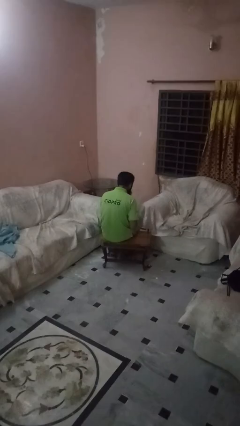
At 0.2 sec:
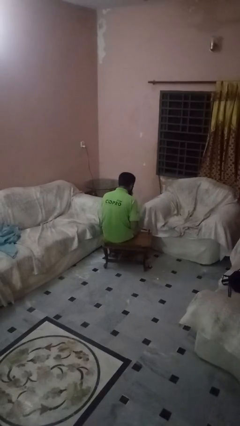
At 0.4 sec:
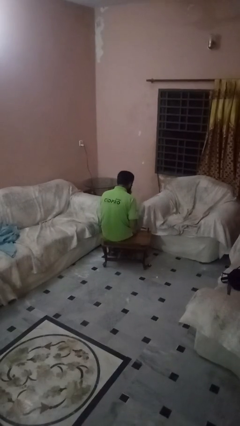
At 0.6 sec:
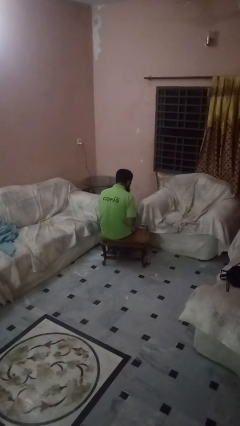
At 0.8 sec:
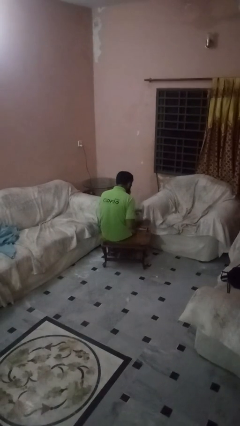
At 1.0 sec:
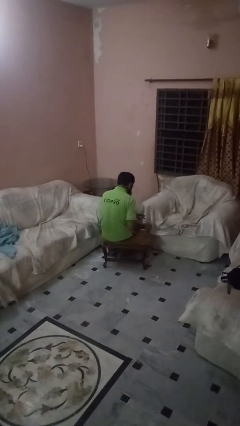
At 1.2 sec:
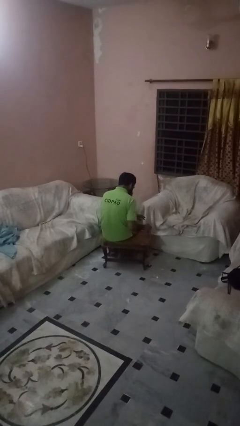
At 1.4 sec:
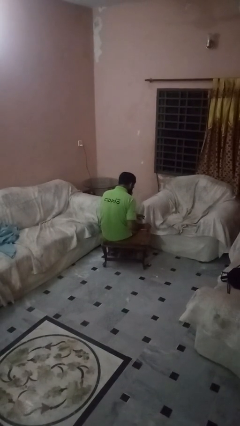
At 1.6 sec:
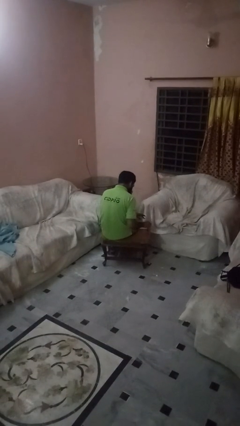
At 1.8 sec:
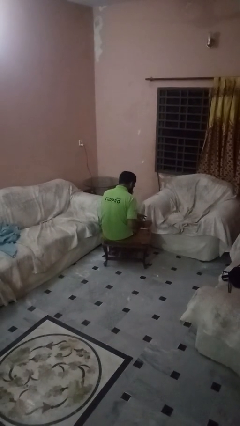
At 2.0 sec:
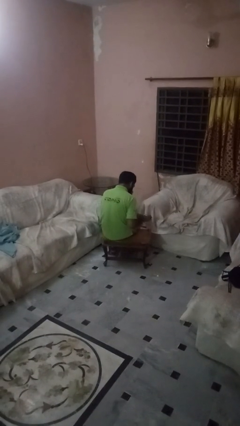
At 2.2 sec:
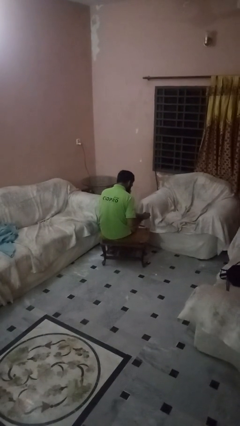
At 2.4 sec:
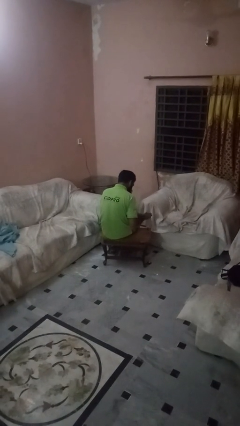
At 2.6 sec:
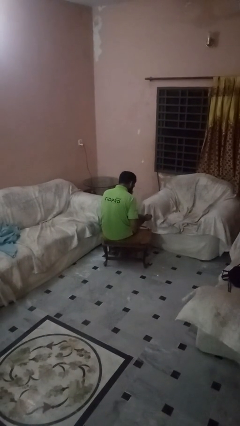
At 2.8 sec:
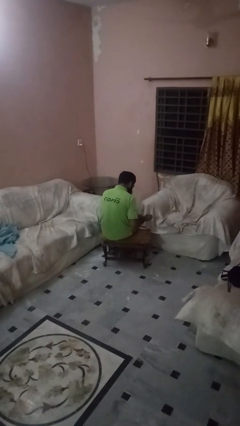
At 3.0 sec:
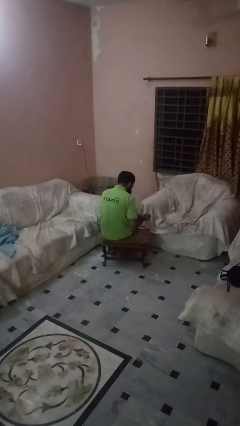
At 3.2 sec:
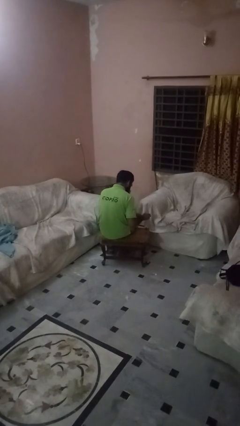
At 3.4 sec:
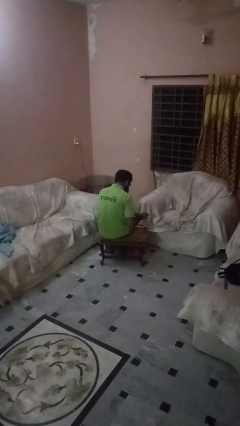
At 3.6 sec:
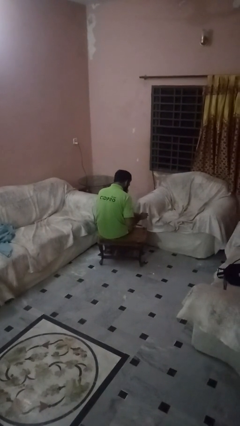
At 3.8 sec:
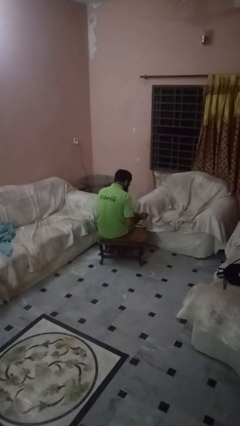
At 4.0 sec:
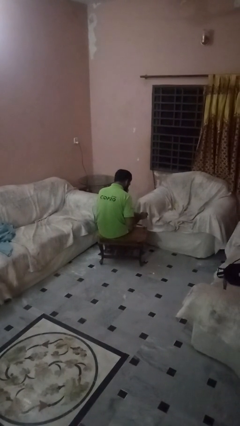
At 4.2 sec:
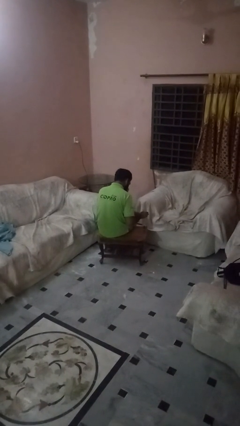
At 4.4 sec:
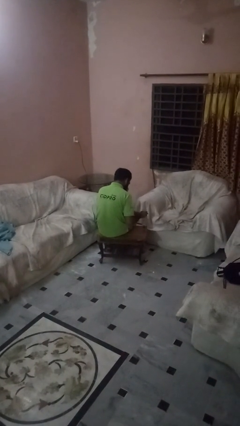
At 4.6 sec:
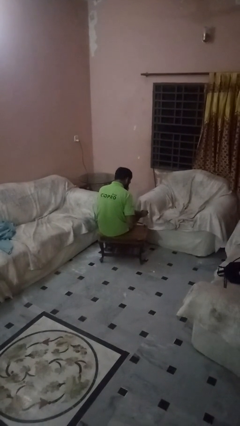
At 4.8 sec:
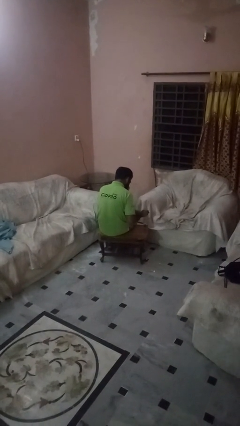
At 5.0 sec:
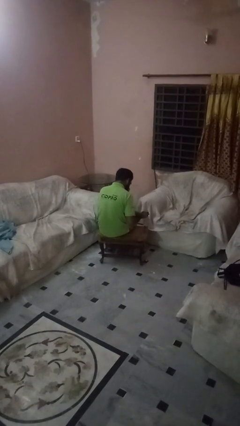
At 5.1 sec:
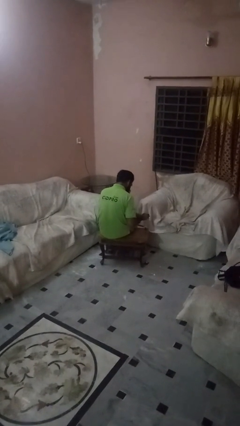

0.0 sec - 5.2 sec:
person paints fingernails

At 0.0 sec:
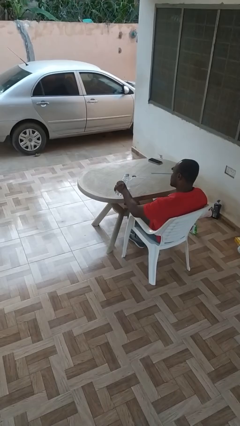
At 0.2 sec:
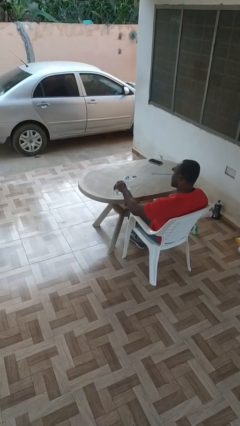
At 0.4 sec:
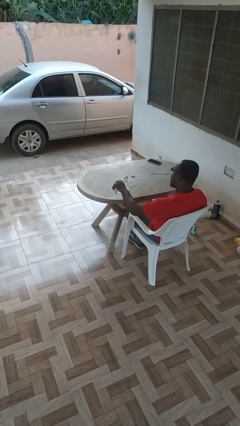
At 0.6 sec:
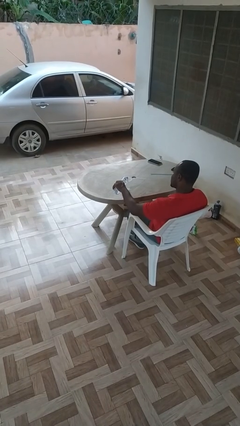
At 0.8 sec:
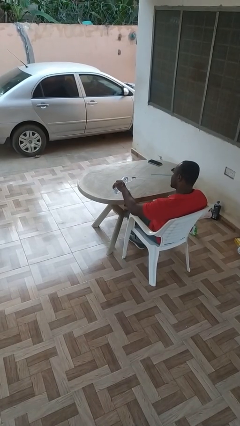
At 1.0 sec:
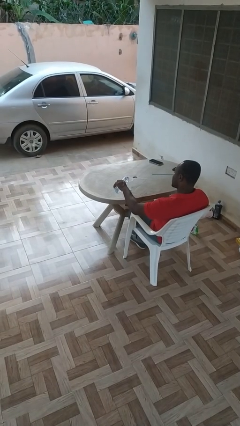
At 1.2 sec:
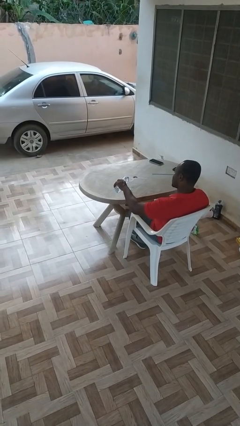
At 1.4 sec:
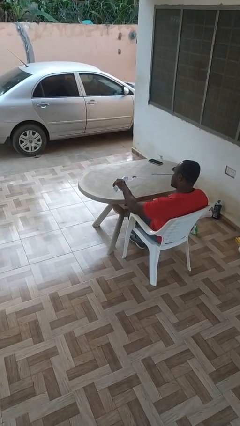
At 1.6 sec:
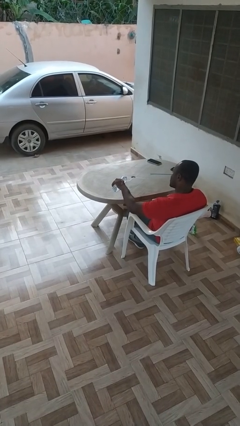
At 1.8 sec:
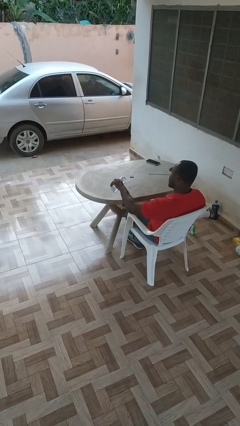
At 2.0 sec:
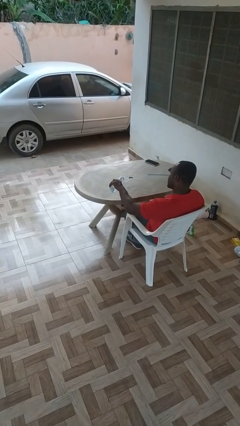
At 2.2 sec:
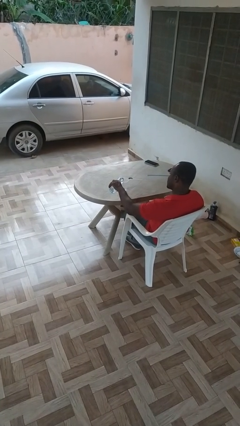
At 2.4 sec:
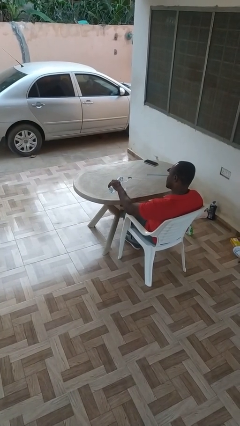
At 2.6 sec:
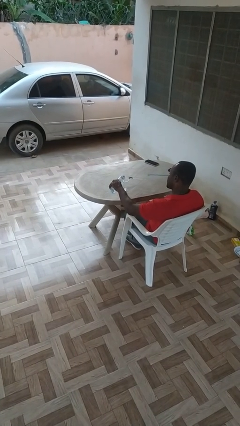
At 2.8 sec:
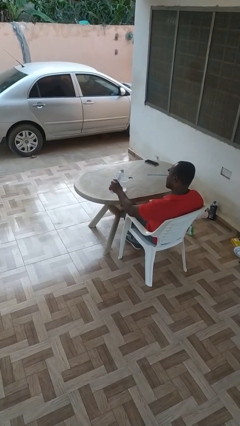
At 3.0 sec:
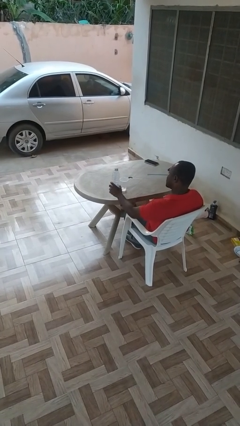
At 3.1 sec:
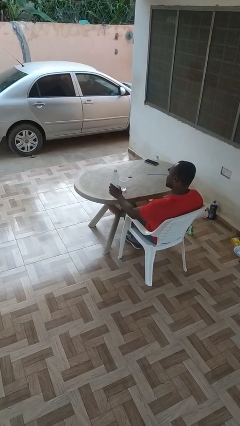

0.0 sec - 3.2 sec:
person pours liquid into cup

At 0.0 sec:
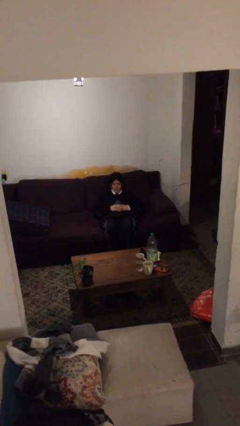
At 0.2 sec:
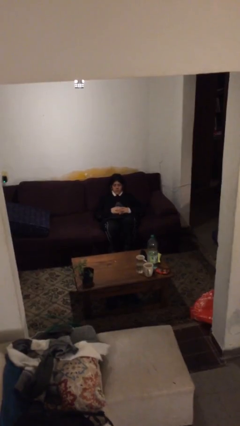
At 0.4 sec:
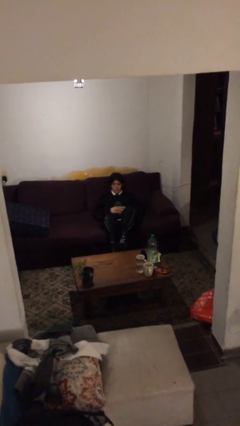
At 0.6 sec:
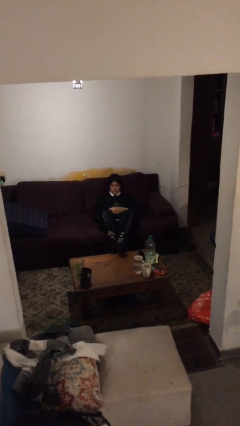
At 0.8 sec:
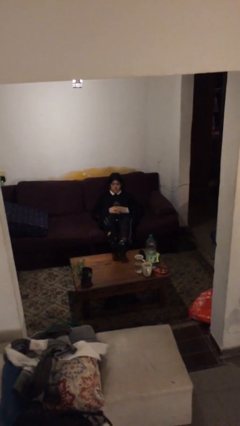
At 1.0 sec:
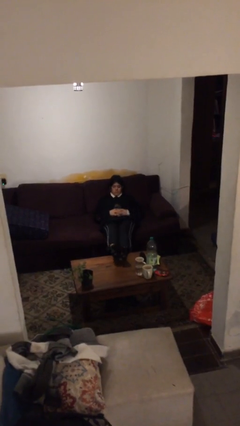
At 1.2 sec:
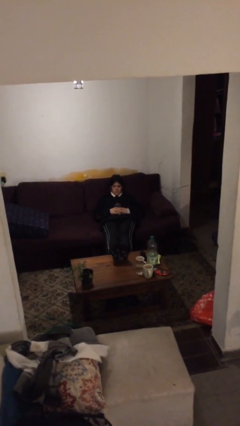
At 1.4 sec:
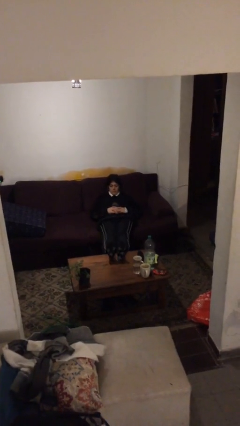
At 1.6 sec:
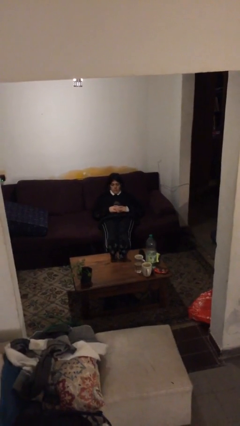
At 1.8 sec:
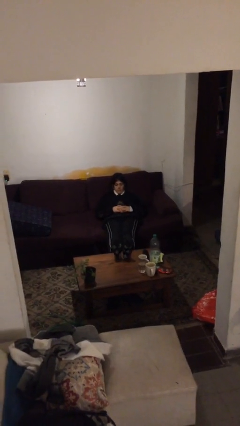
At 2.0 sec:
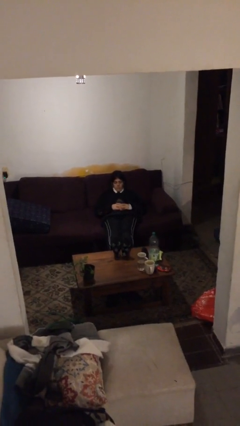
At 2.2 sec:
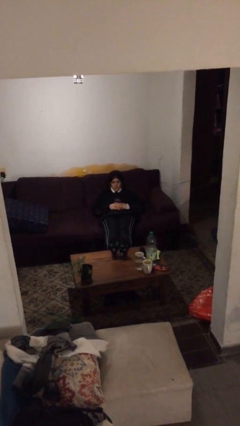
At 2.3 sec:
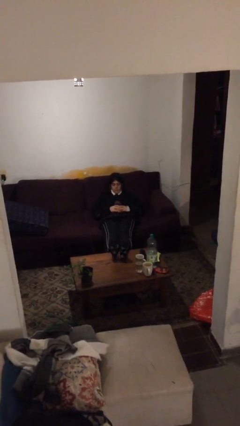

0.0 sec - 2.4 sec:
person puts feet up

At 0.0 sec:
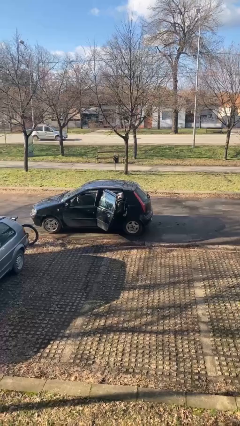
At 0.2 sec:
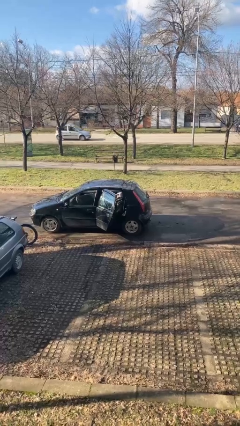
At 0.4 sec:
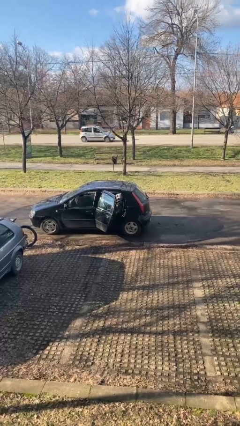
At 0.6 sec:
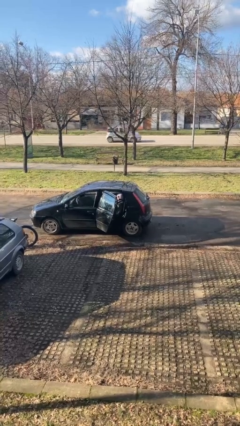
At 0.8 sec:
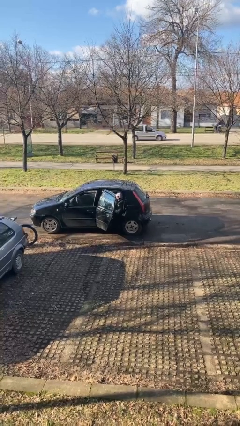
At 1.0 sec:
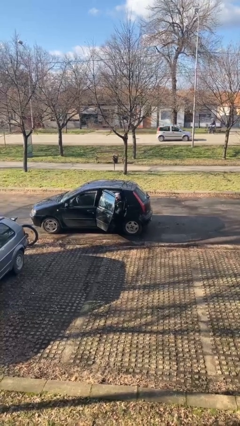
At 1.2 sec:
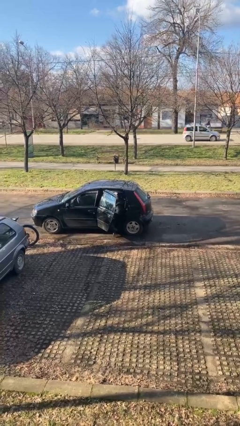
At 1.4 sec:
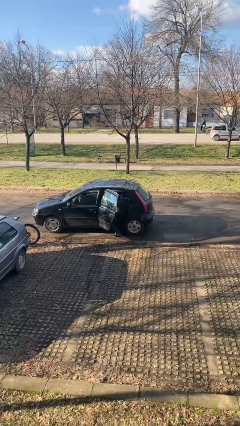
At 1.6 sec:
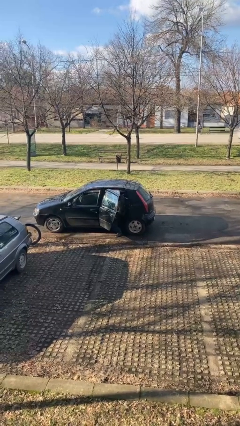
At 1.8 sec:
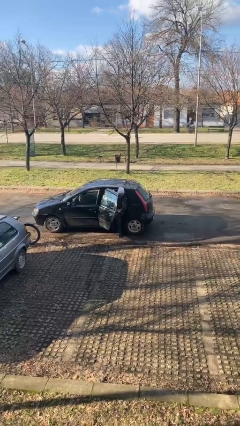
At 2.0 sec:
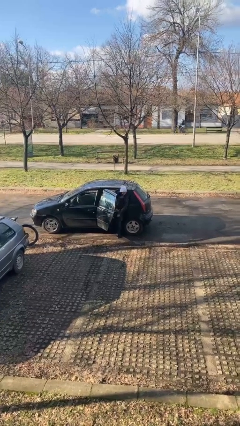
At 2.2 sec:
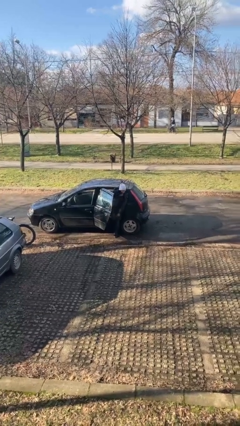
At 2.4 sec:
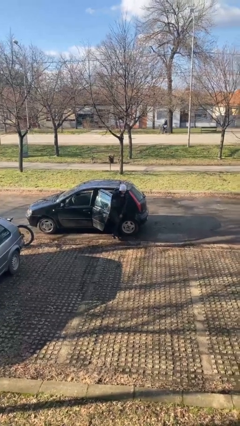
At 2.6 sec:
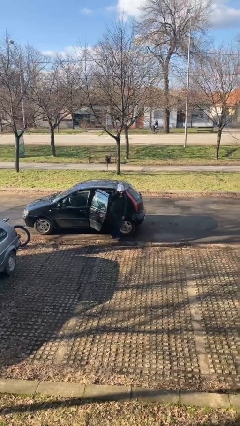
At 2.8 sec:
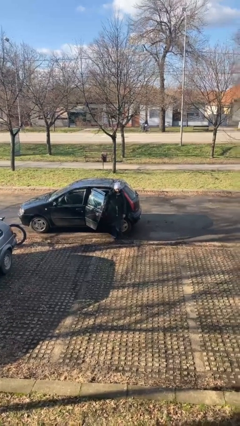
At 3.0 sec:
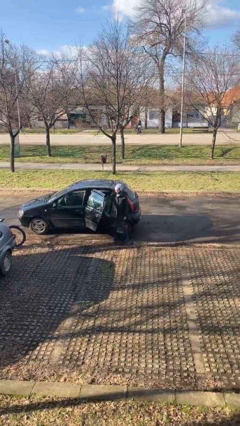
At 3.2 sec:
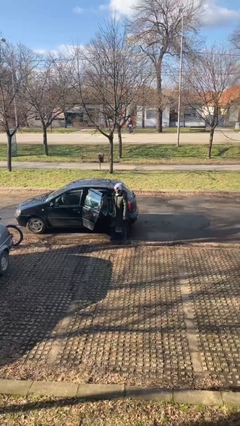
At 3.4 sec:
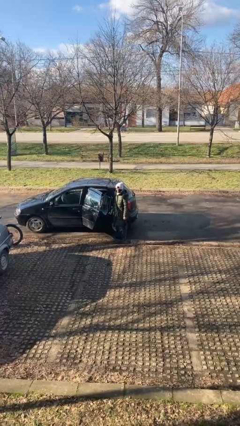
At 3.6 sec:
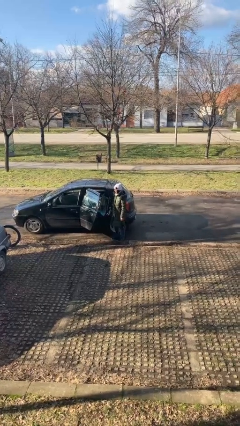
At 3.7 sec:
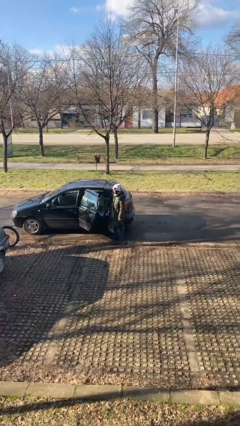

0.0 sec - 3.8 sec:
person exits car

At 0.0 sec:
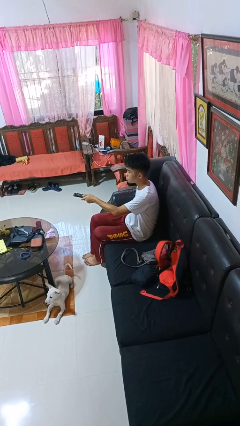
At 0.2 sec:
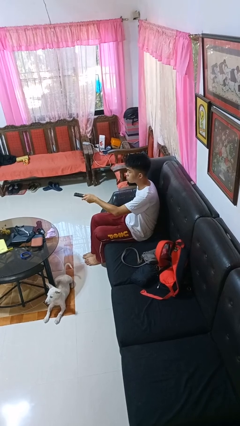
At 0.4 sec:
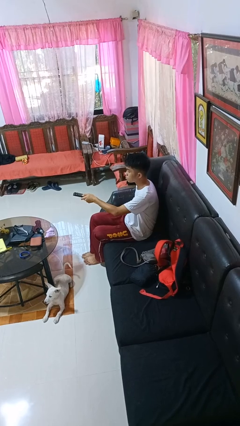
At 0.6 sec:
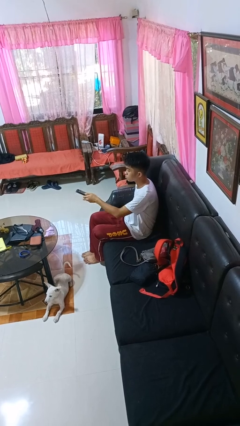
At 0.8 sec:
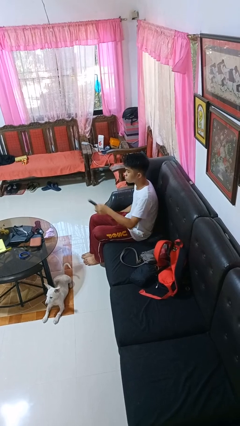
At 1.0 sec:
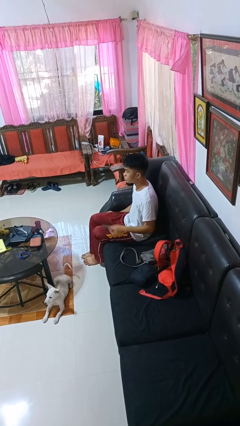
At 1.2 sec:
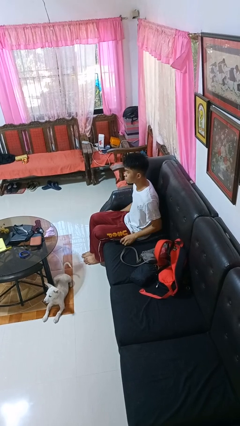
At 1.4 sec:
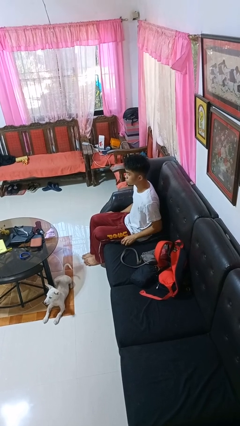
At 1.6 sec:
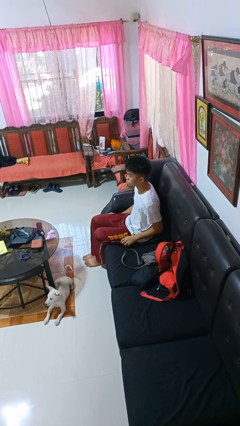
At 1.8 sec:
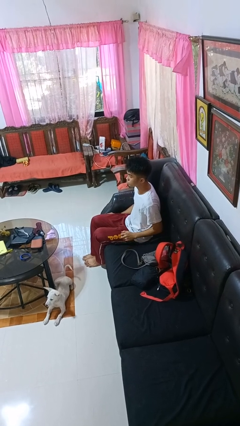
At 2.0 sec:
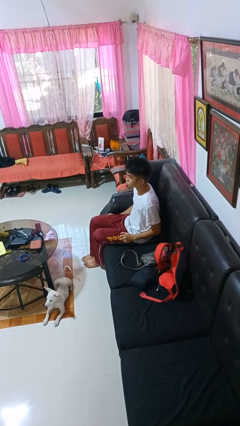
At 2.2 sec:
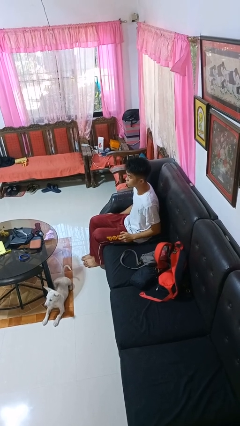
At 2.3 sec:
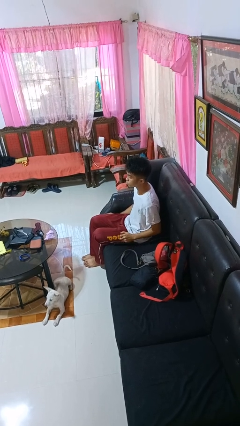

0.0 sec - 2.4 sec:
person puts down object on shelf
